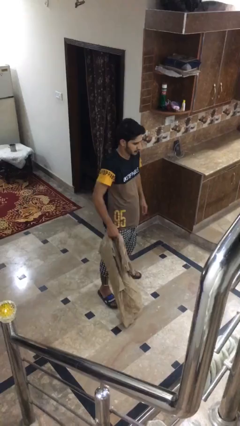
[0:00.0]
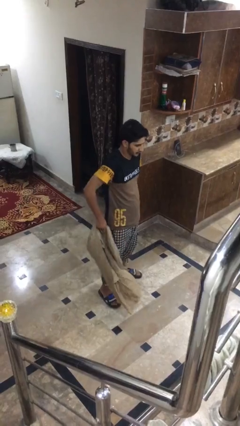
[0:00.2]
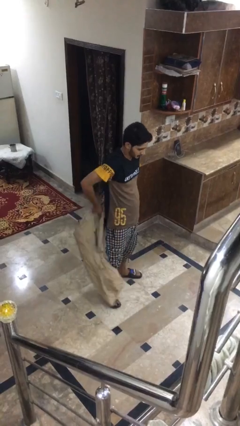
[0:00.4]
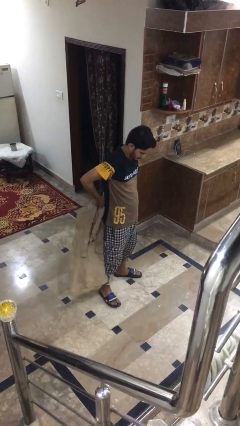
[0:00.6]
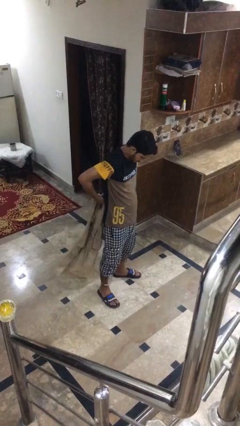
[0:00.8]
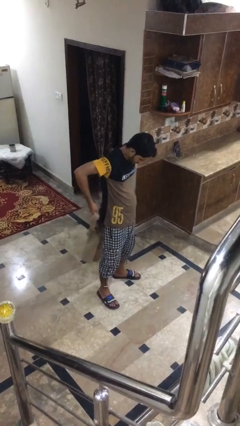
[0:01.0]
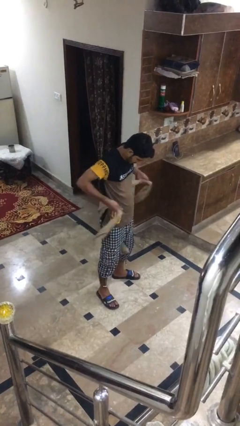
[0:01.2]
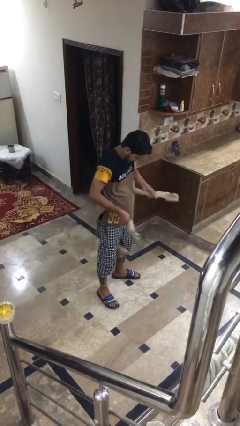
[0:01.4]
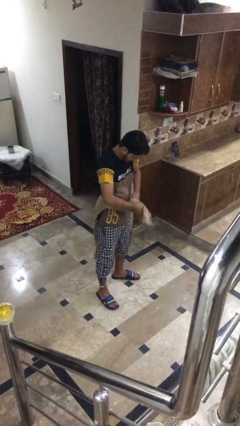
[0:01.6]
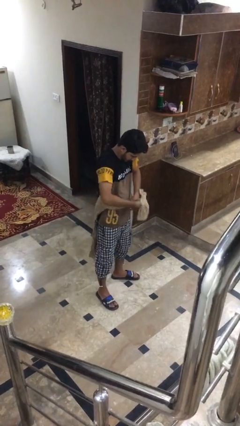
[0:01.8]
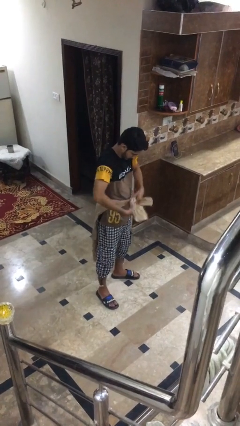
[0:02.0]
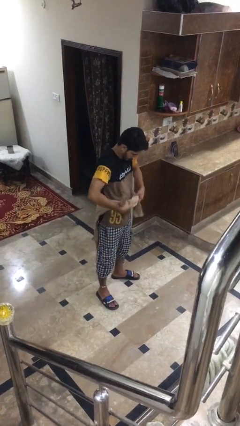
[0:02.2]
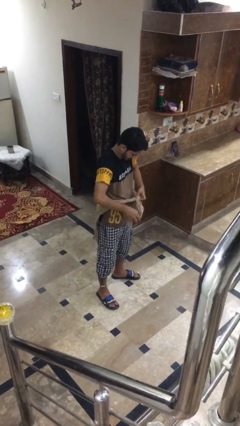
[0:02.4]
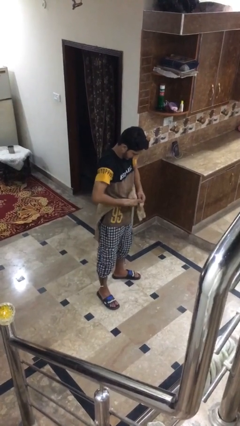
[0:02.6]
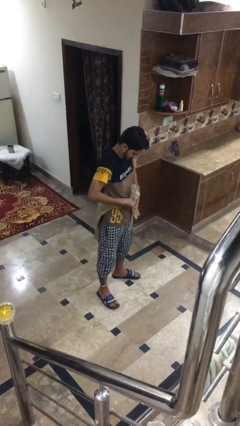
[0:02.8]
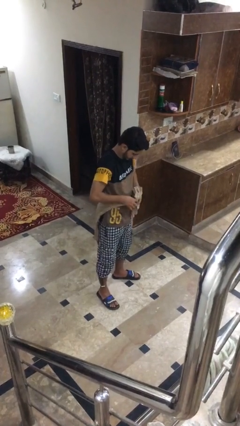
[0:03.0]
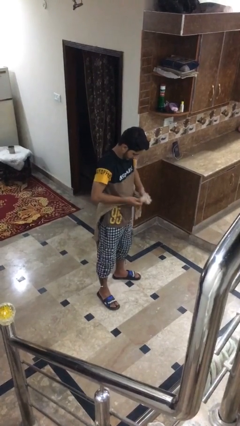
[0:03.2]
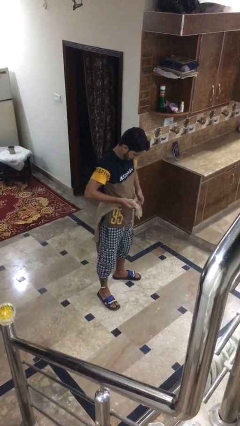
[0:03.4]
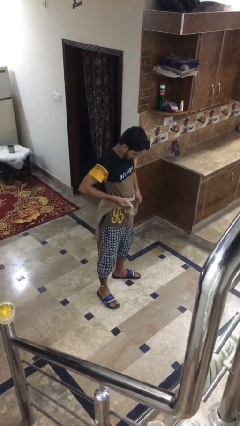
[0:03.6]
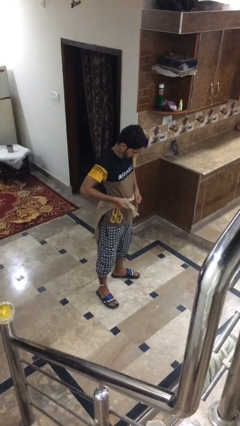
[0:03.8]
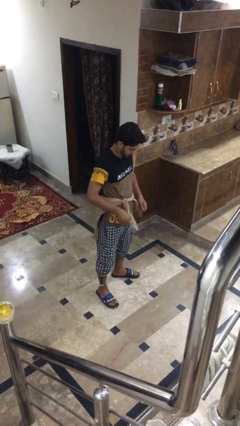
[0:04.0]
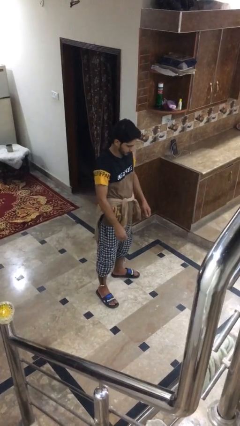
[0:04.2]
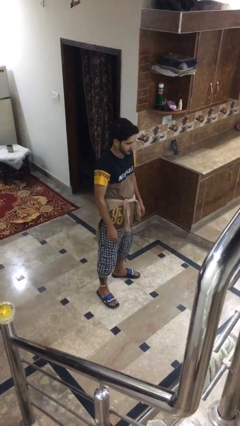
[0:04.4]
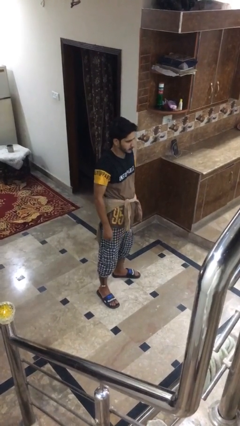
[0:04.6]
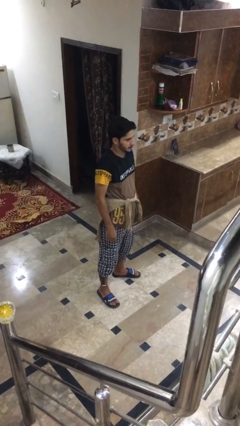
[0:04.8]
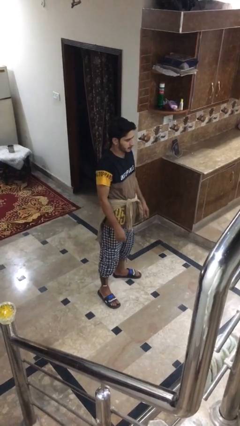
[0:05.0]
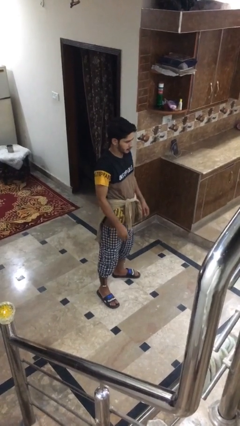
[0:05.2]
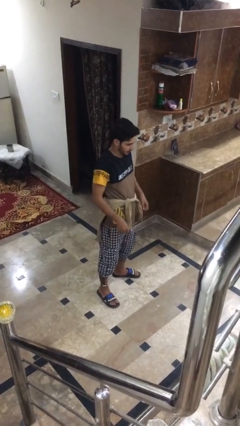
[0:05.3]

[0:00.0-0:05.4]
person ties jacket around waist

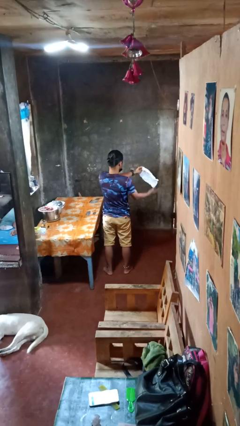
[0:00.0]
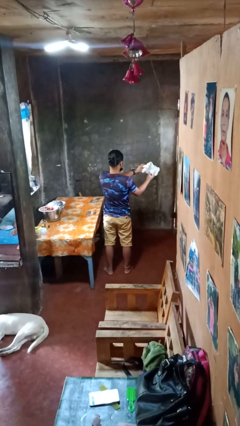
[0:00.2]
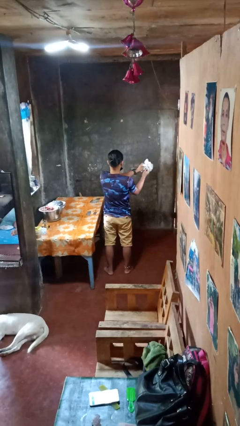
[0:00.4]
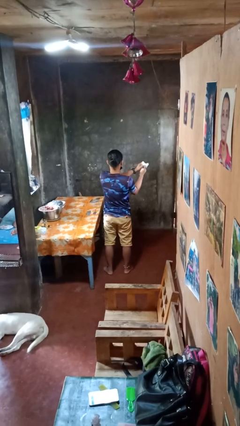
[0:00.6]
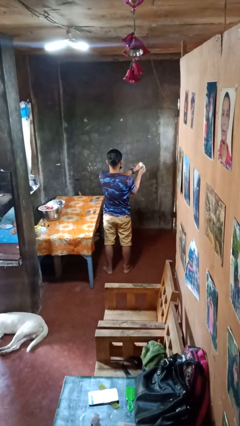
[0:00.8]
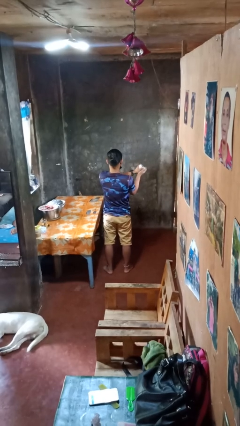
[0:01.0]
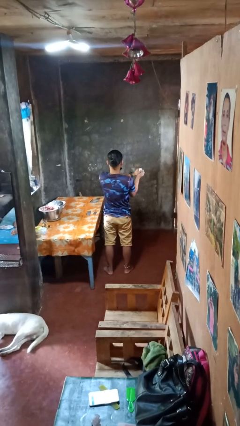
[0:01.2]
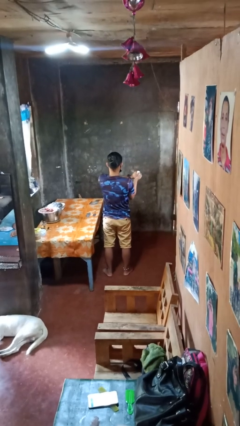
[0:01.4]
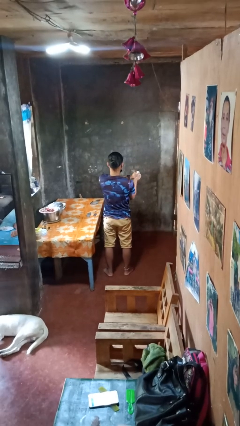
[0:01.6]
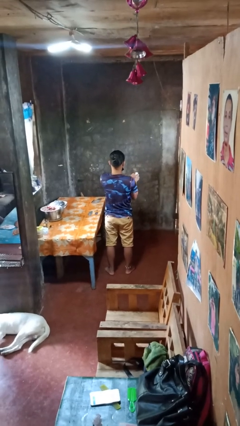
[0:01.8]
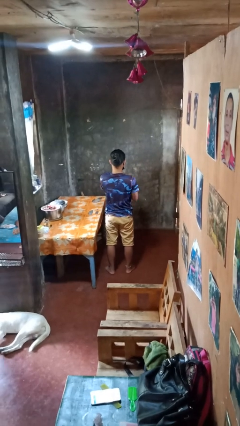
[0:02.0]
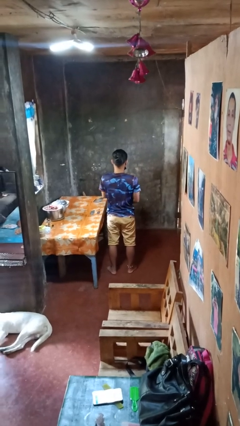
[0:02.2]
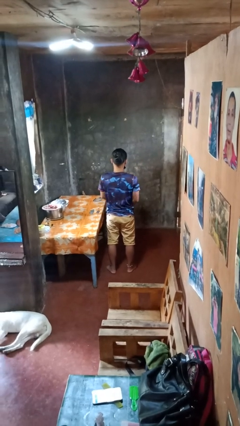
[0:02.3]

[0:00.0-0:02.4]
person crumples paper

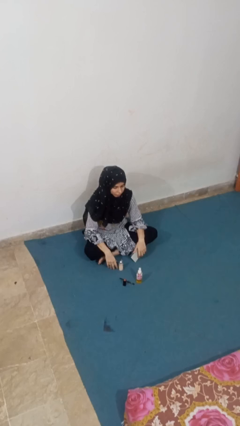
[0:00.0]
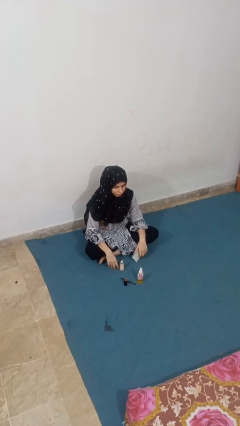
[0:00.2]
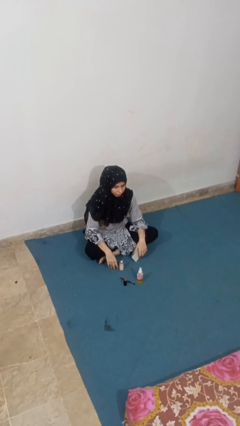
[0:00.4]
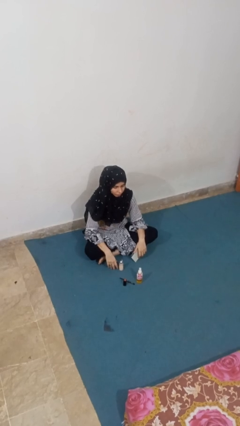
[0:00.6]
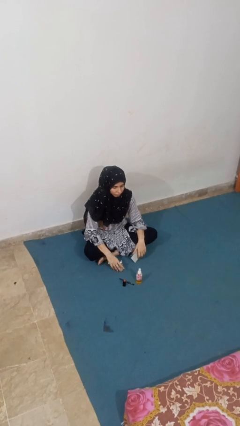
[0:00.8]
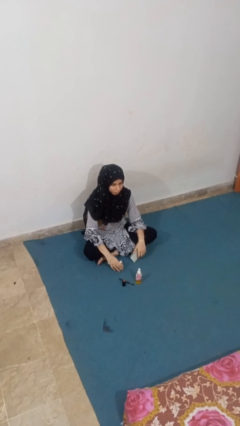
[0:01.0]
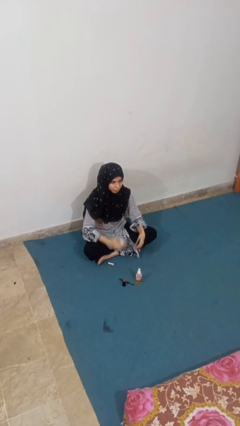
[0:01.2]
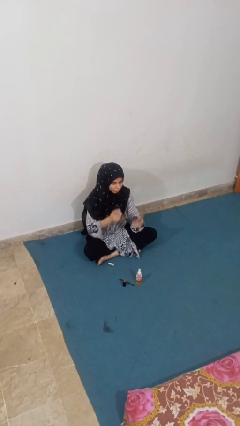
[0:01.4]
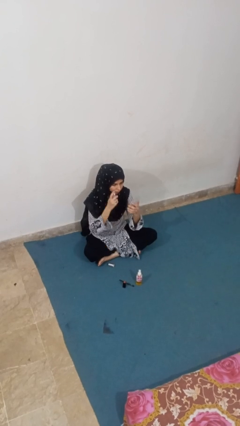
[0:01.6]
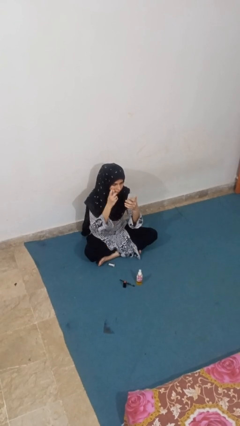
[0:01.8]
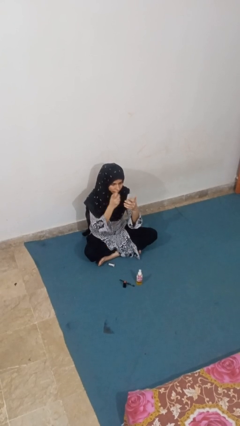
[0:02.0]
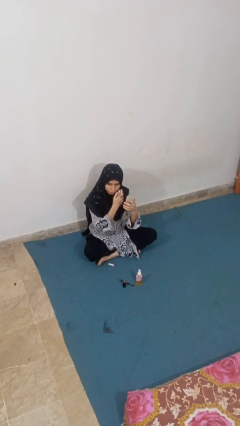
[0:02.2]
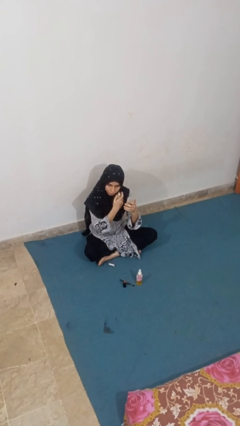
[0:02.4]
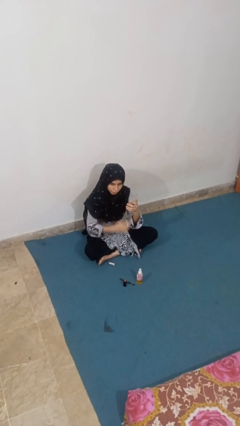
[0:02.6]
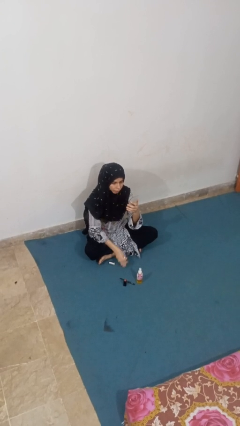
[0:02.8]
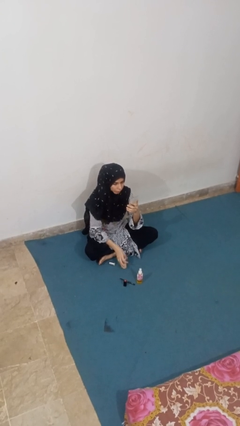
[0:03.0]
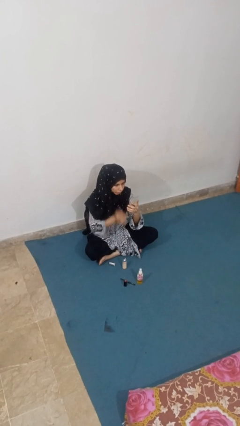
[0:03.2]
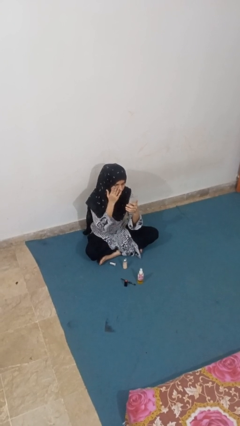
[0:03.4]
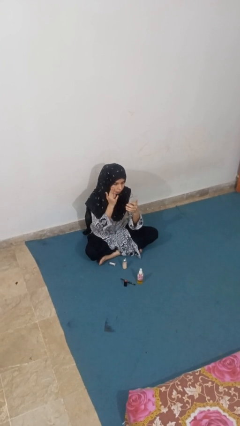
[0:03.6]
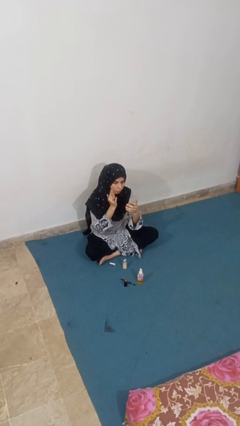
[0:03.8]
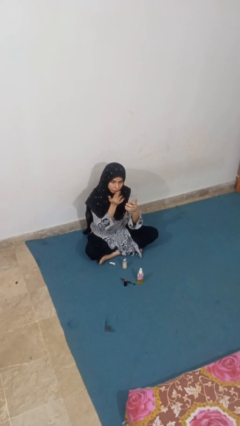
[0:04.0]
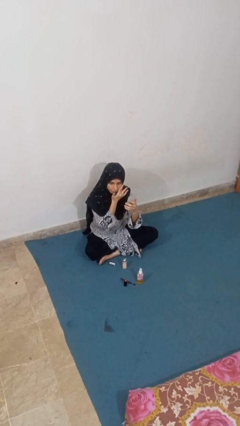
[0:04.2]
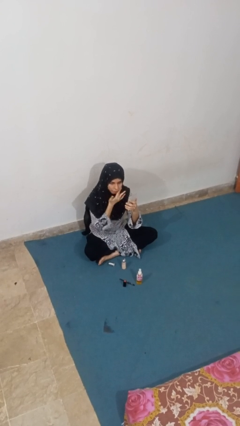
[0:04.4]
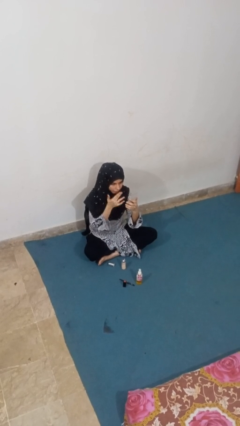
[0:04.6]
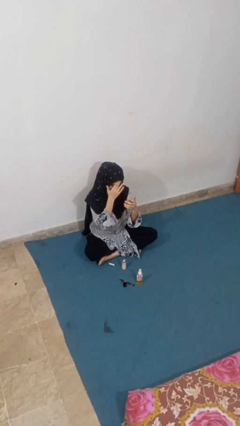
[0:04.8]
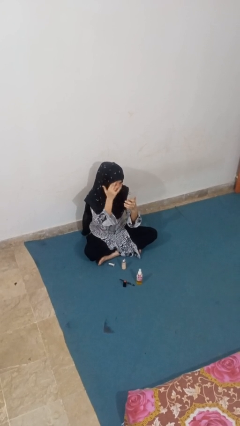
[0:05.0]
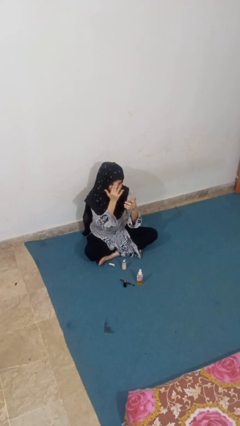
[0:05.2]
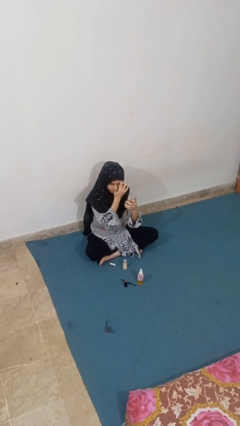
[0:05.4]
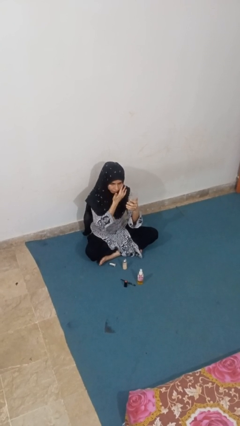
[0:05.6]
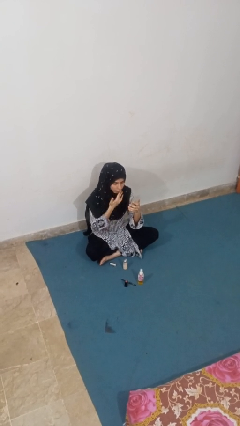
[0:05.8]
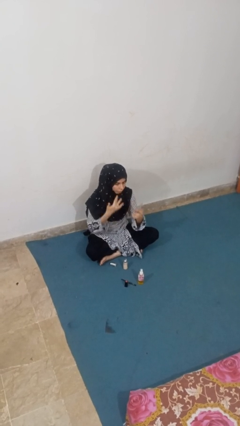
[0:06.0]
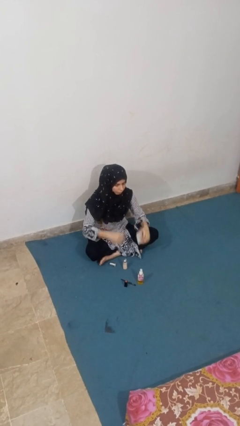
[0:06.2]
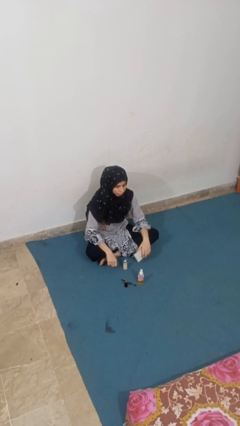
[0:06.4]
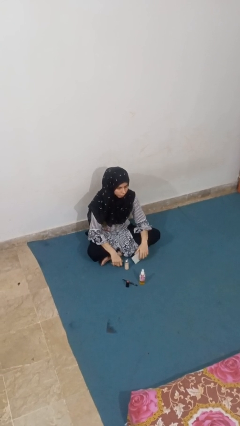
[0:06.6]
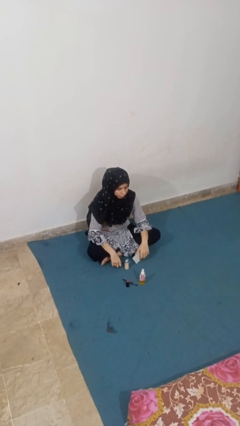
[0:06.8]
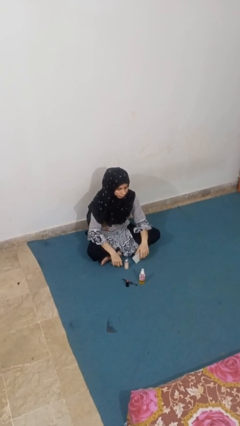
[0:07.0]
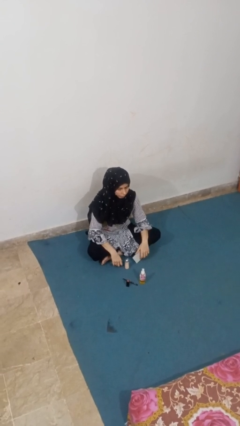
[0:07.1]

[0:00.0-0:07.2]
person applies foundation makeup

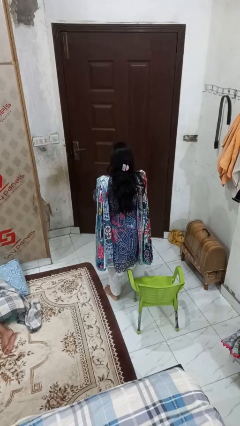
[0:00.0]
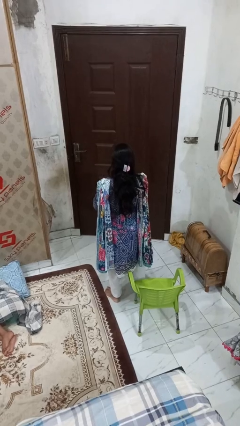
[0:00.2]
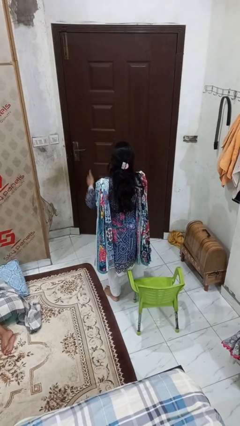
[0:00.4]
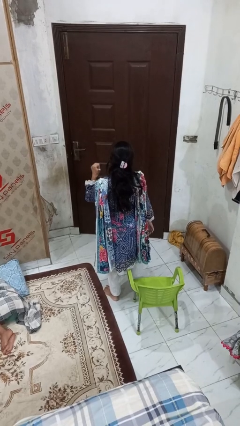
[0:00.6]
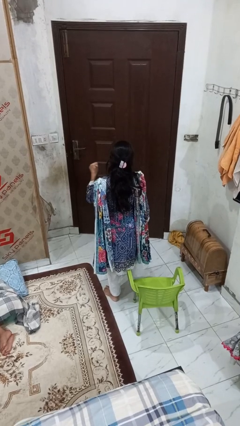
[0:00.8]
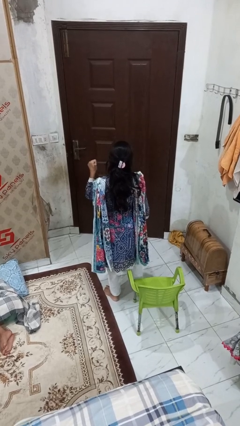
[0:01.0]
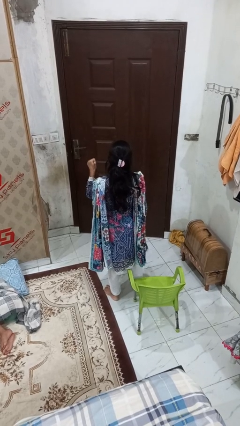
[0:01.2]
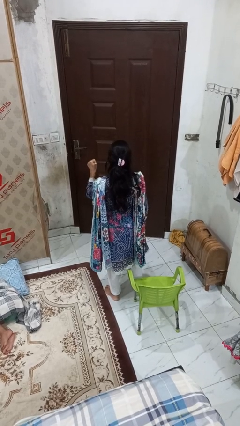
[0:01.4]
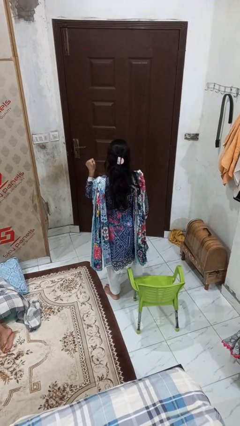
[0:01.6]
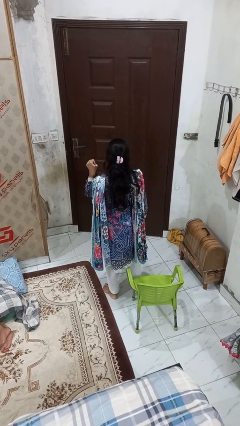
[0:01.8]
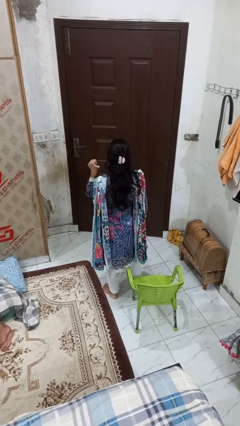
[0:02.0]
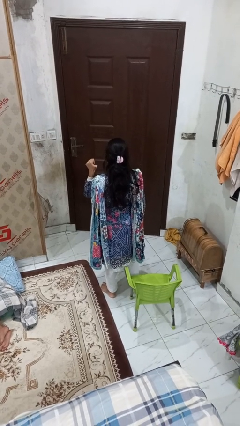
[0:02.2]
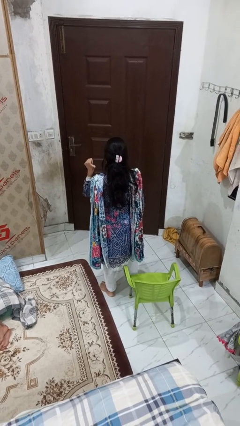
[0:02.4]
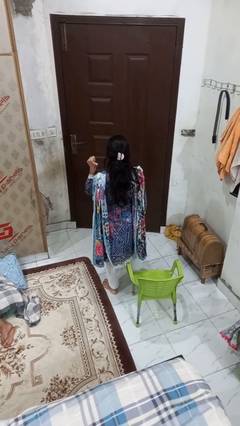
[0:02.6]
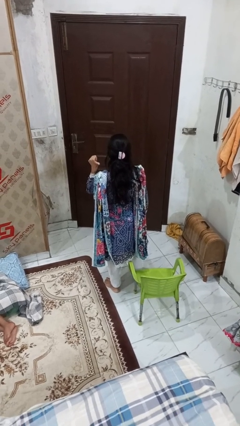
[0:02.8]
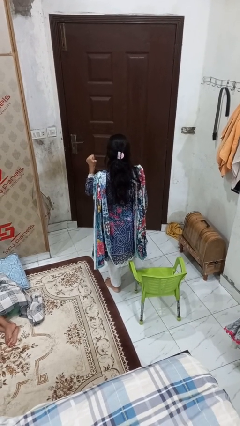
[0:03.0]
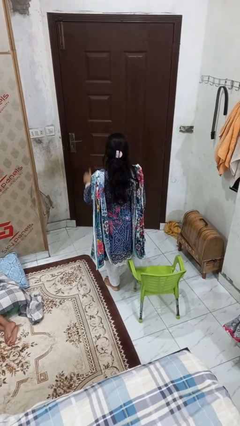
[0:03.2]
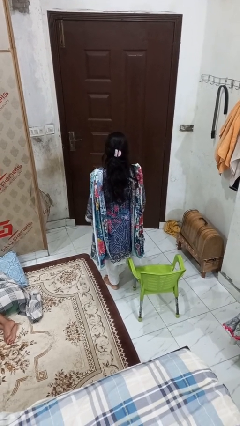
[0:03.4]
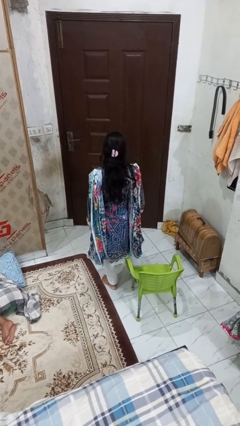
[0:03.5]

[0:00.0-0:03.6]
person gestures behind me
